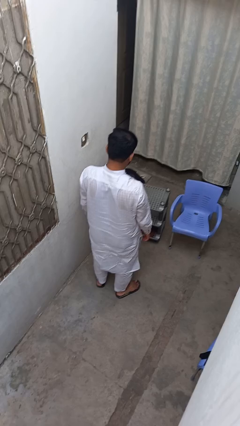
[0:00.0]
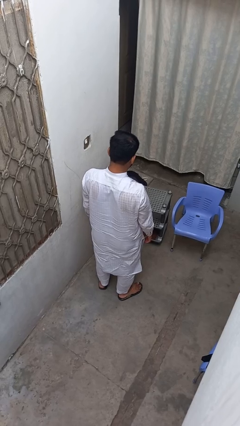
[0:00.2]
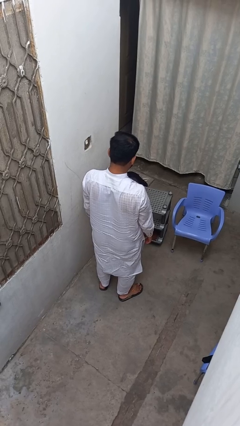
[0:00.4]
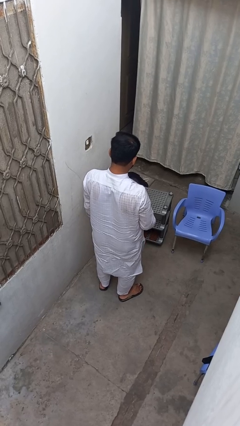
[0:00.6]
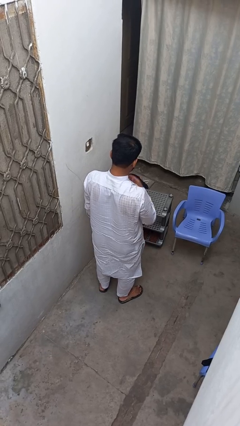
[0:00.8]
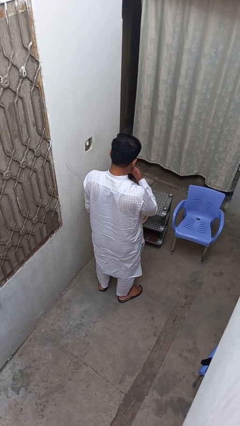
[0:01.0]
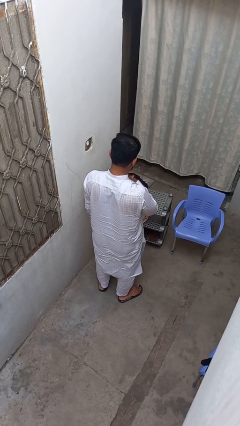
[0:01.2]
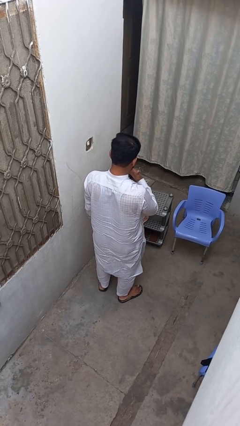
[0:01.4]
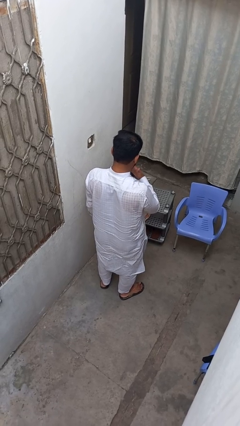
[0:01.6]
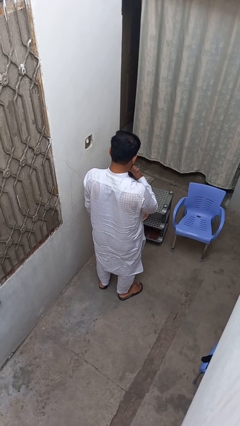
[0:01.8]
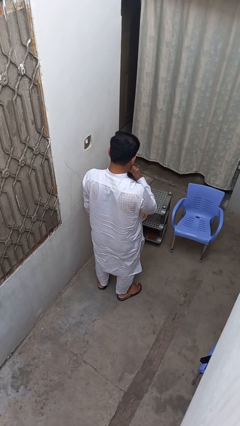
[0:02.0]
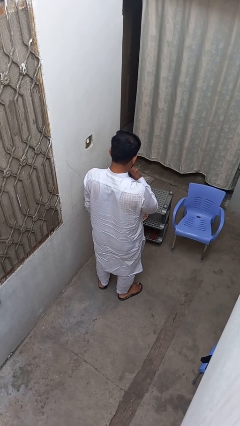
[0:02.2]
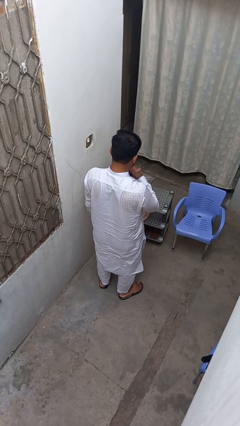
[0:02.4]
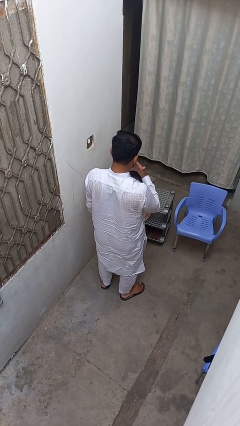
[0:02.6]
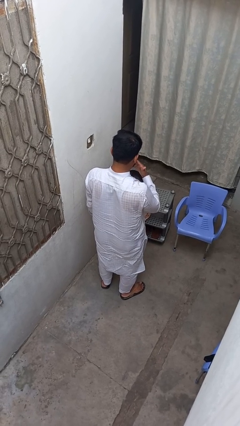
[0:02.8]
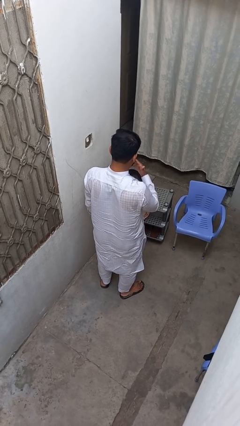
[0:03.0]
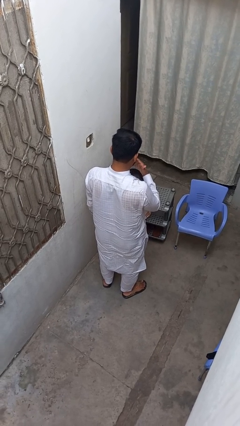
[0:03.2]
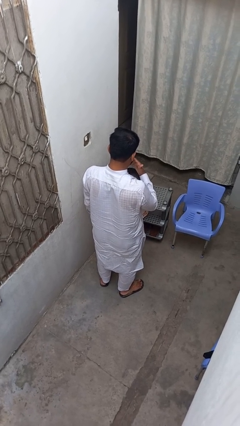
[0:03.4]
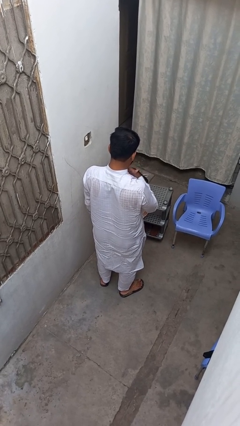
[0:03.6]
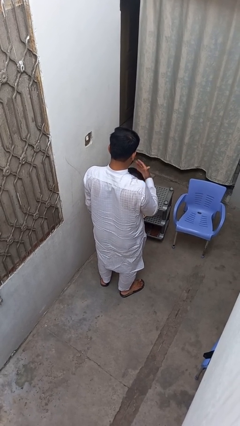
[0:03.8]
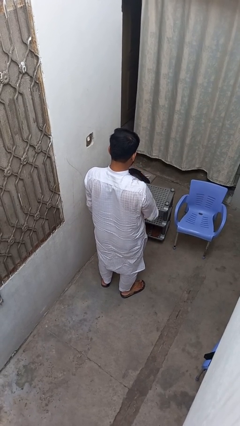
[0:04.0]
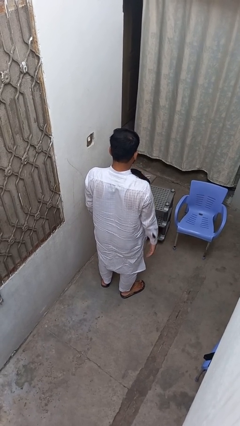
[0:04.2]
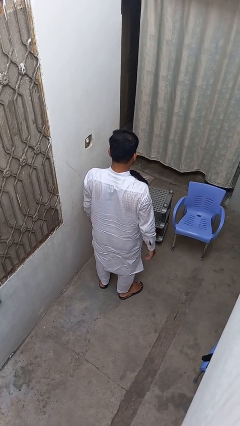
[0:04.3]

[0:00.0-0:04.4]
person drums on chest

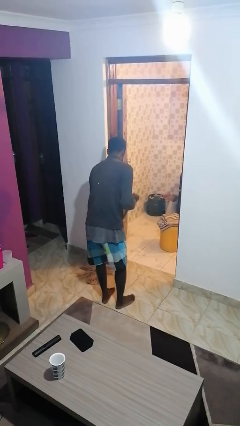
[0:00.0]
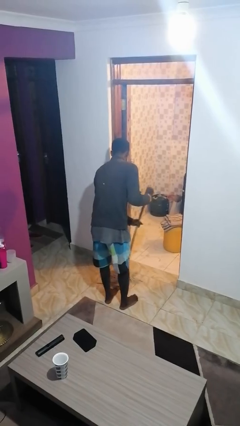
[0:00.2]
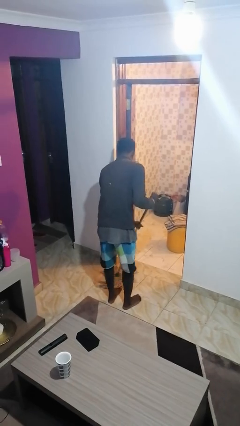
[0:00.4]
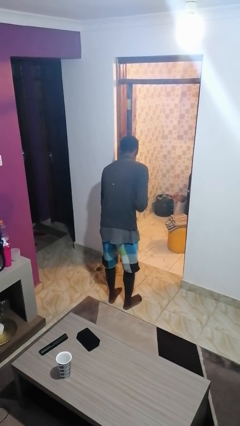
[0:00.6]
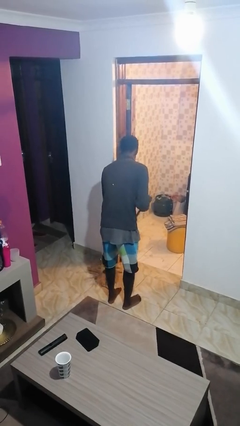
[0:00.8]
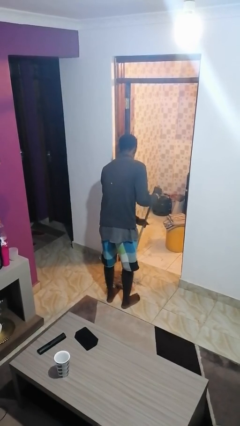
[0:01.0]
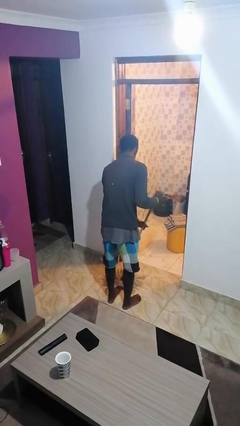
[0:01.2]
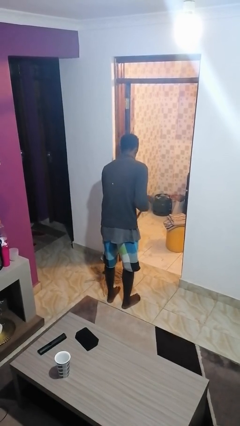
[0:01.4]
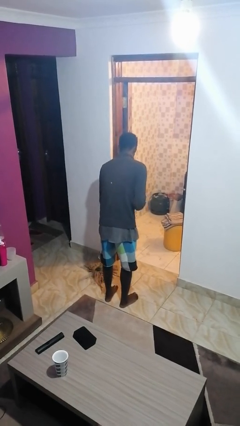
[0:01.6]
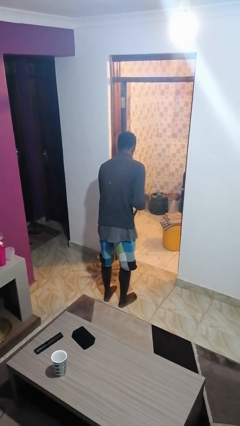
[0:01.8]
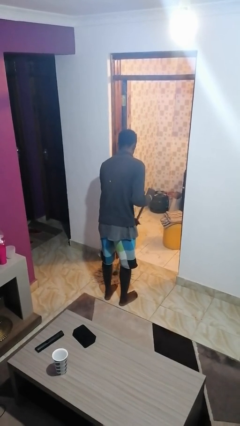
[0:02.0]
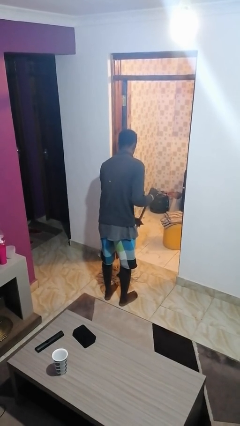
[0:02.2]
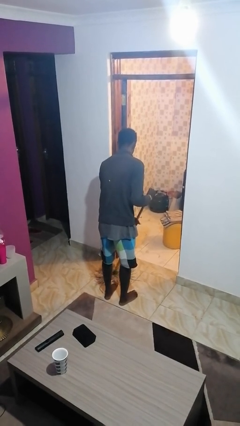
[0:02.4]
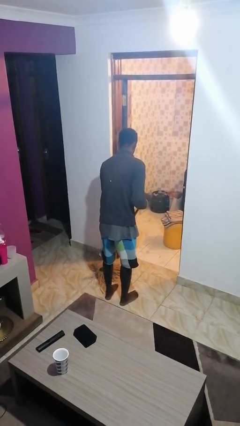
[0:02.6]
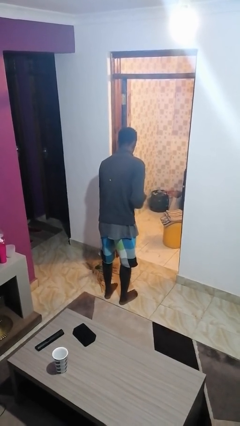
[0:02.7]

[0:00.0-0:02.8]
person mops

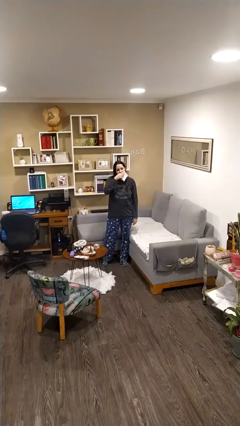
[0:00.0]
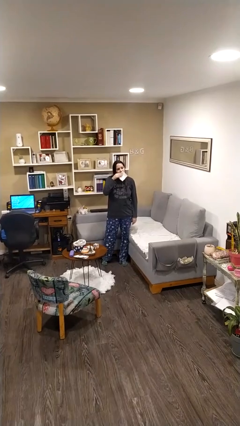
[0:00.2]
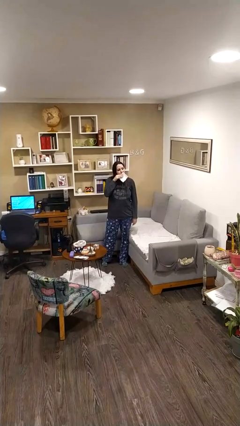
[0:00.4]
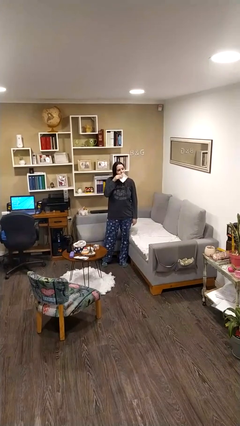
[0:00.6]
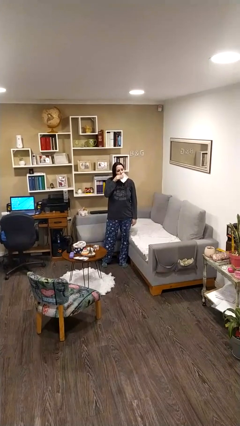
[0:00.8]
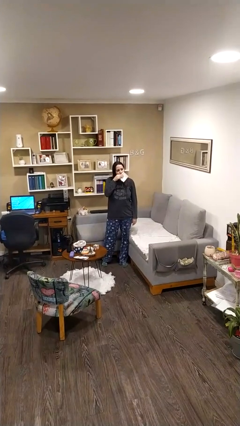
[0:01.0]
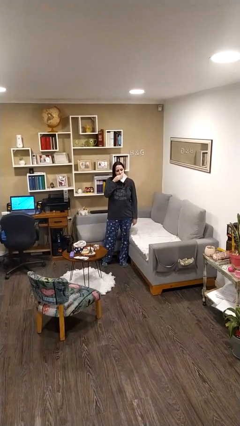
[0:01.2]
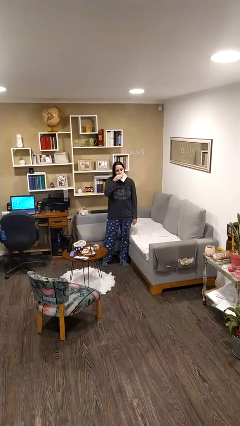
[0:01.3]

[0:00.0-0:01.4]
person wipes mouth with napkin

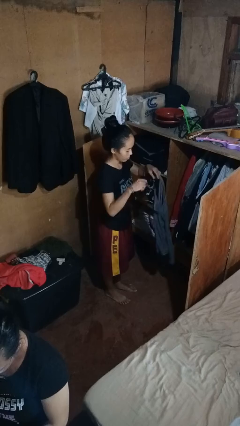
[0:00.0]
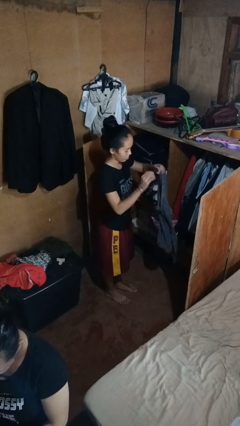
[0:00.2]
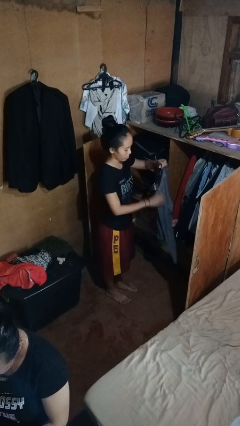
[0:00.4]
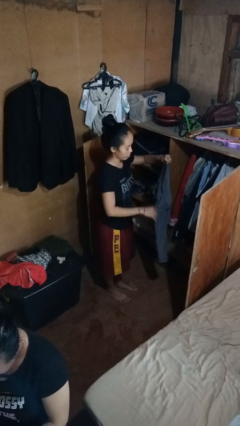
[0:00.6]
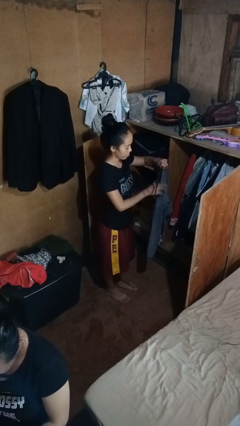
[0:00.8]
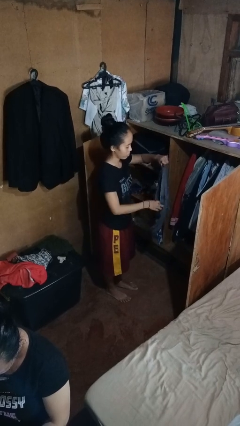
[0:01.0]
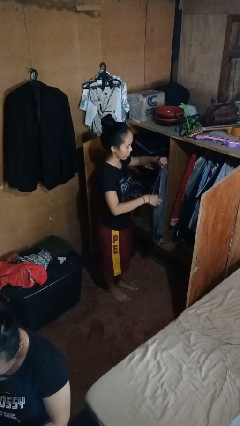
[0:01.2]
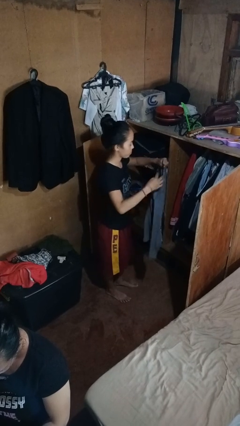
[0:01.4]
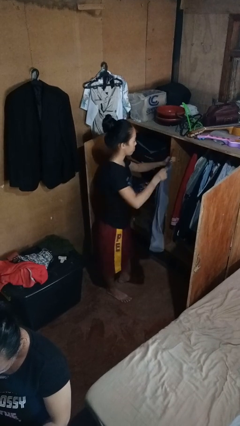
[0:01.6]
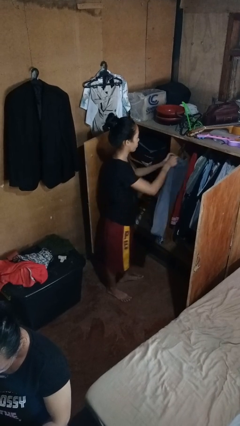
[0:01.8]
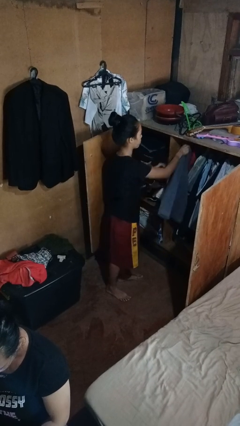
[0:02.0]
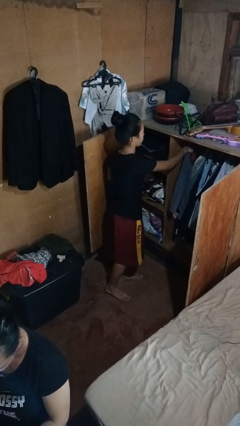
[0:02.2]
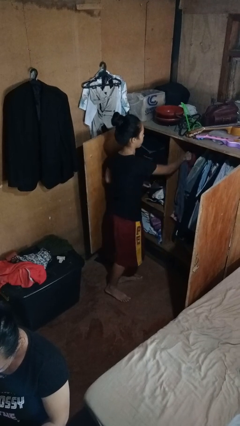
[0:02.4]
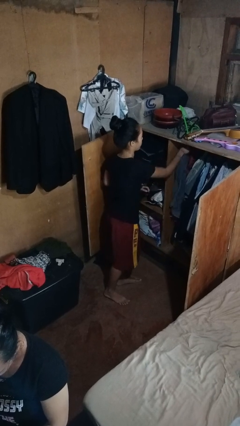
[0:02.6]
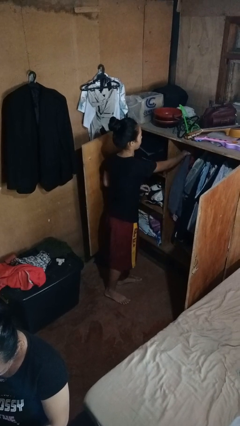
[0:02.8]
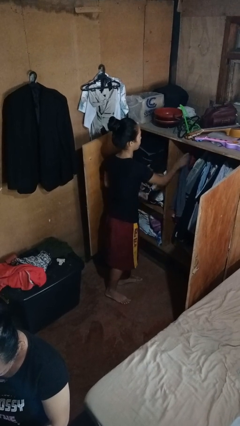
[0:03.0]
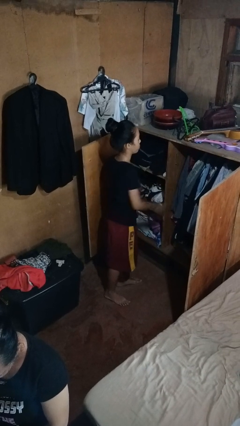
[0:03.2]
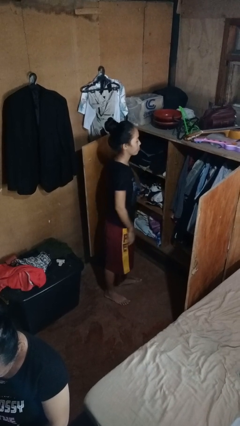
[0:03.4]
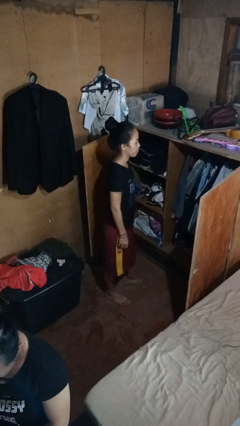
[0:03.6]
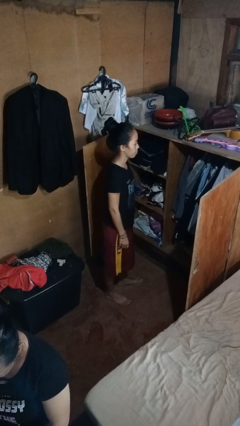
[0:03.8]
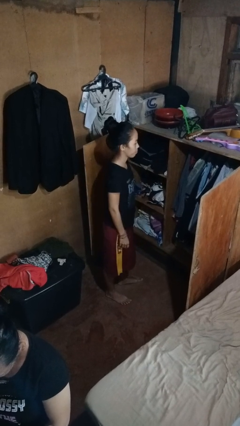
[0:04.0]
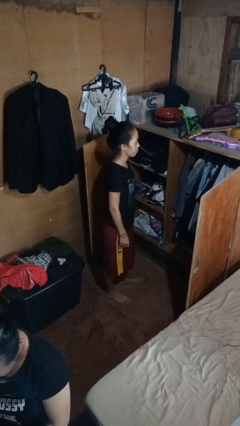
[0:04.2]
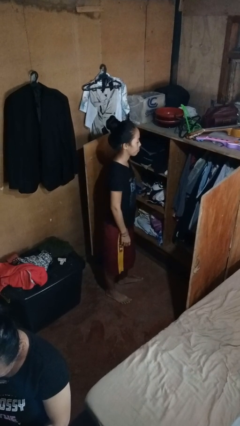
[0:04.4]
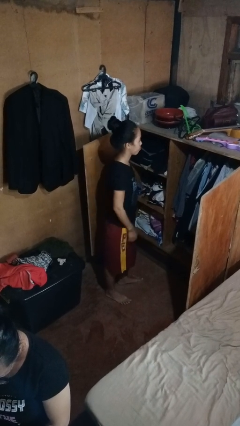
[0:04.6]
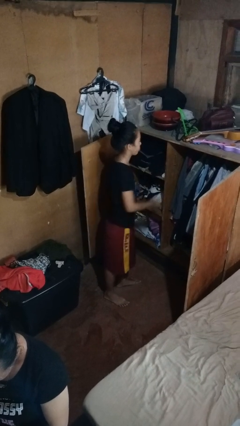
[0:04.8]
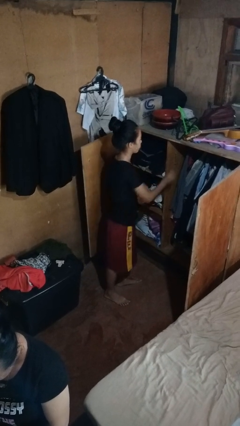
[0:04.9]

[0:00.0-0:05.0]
person puts clothes into closet

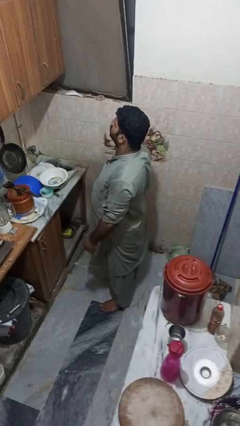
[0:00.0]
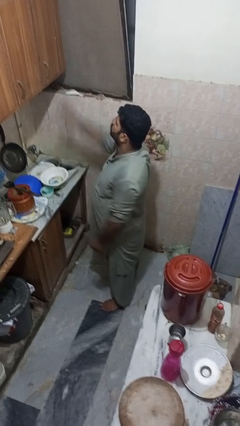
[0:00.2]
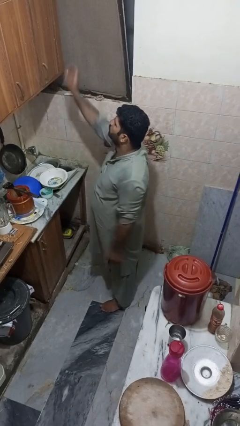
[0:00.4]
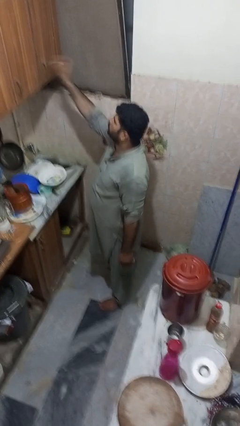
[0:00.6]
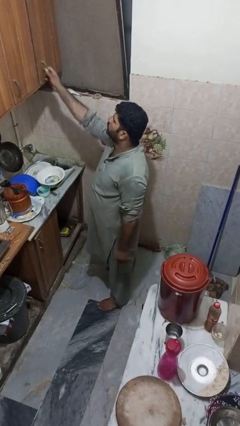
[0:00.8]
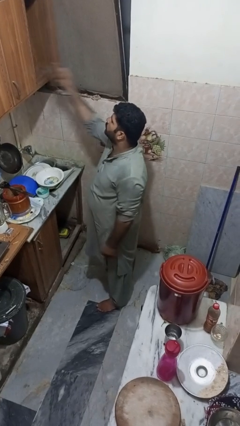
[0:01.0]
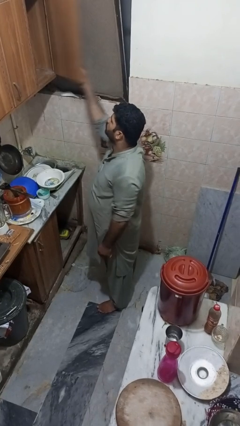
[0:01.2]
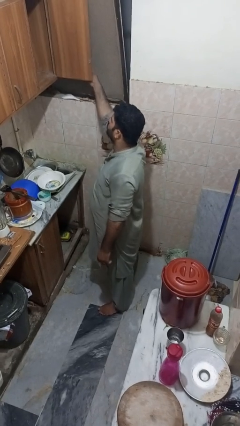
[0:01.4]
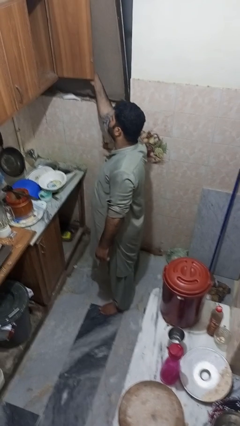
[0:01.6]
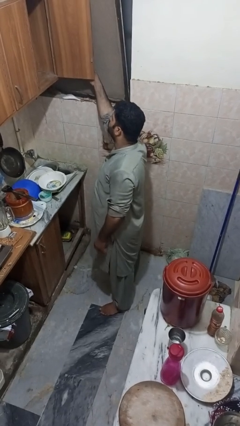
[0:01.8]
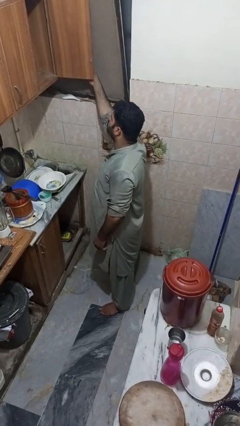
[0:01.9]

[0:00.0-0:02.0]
person opens cabinet

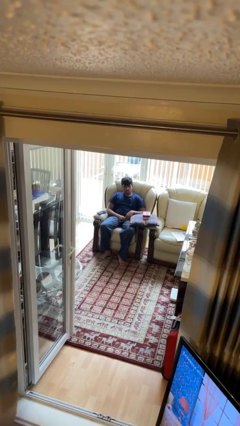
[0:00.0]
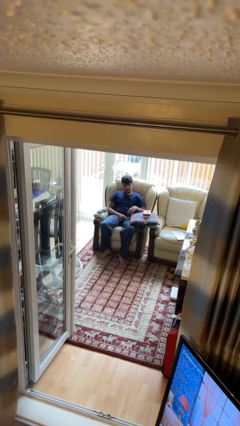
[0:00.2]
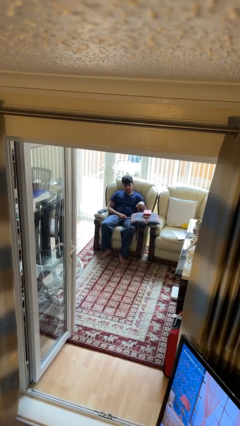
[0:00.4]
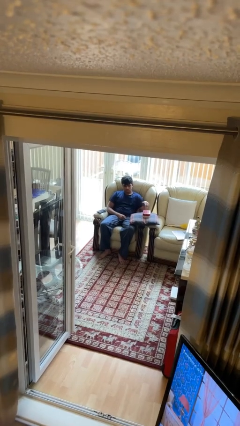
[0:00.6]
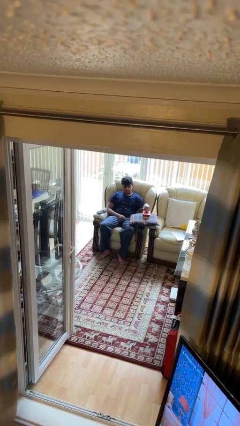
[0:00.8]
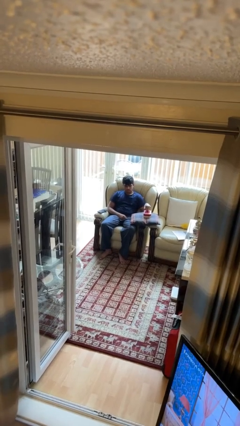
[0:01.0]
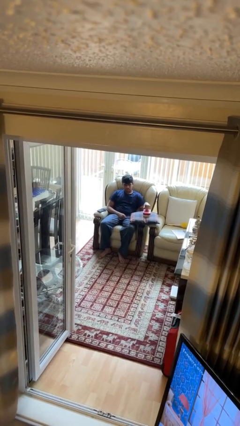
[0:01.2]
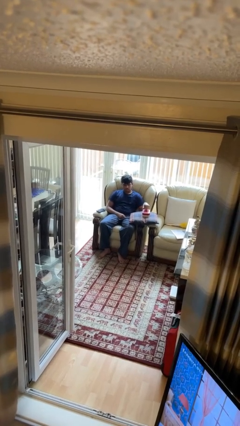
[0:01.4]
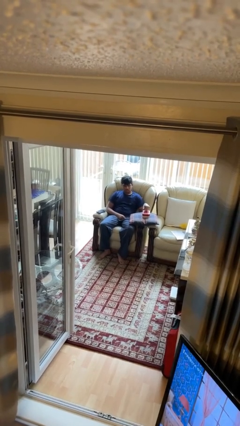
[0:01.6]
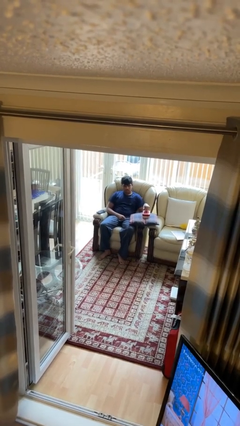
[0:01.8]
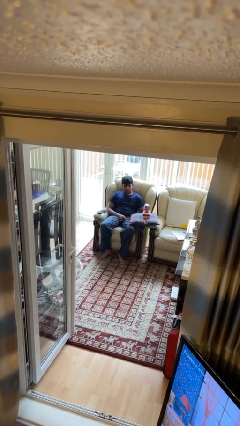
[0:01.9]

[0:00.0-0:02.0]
person taps object with finger
